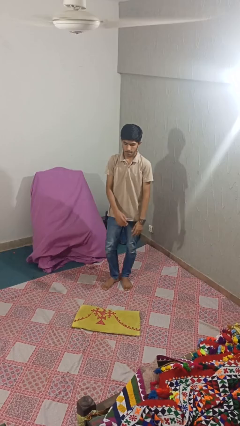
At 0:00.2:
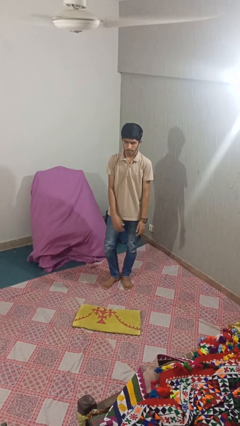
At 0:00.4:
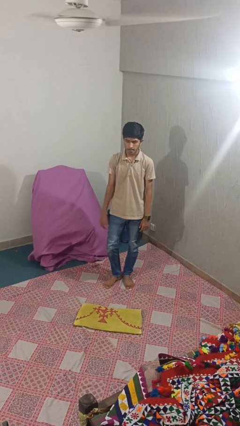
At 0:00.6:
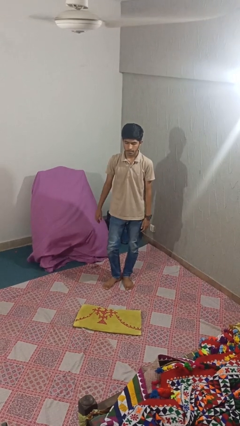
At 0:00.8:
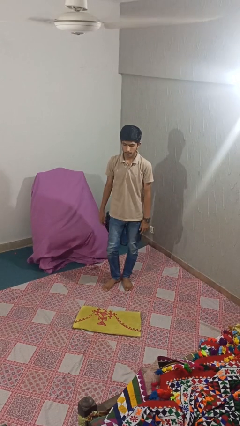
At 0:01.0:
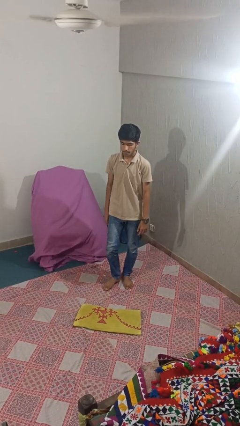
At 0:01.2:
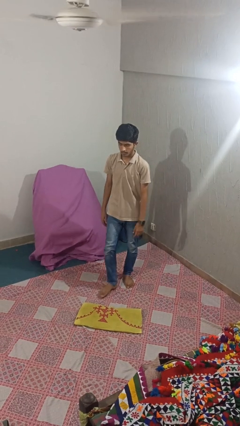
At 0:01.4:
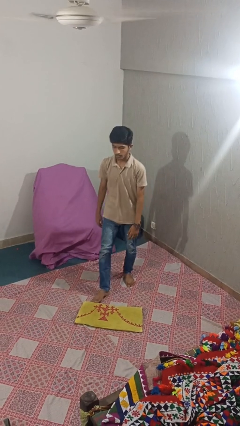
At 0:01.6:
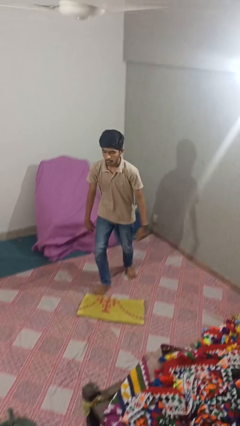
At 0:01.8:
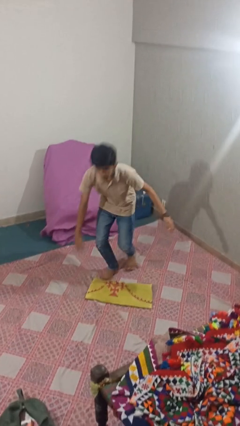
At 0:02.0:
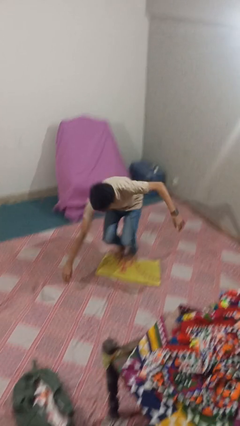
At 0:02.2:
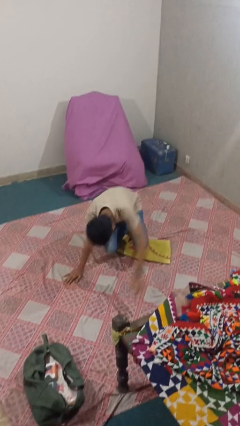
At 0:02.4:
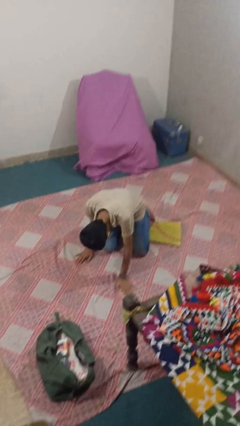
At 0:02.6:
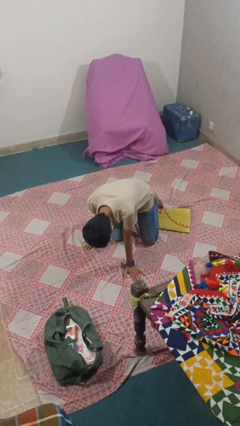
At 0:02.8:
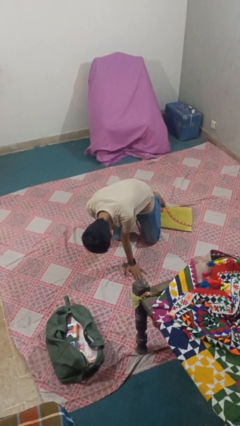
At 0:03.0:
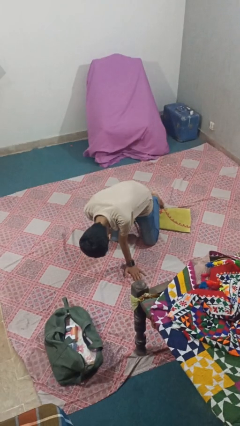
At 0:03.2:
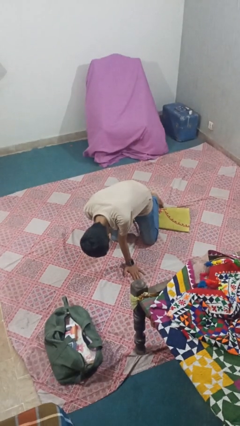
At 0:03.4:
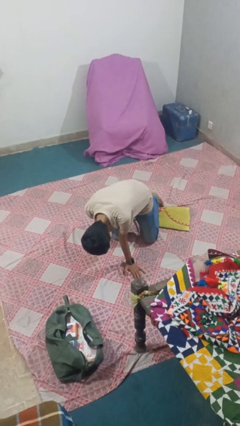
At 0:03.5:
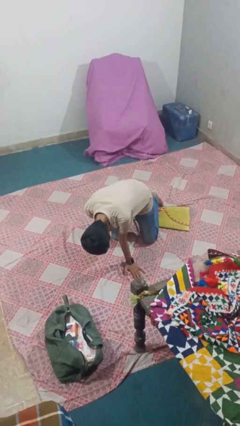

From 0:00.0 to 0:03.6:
person trips on object on floor

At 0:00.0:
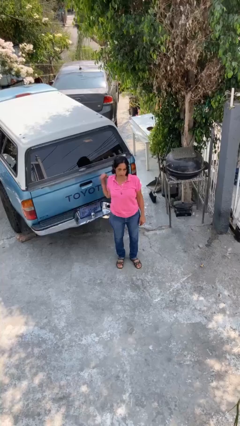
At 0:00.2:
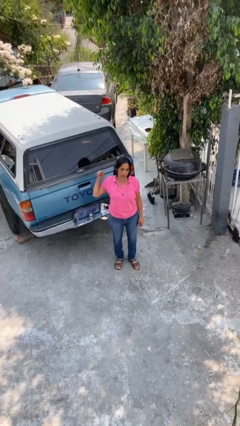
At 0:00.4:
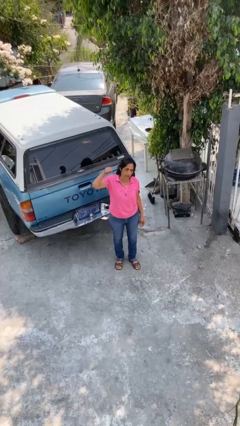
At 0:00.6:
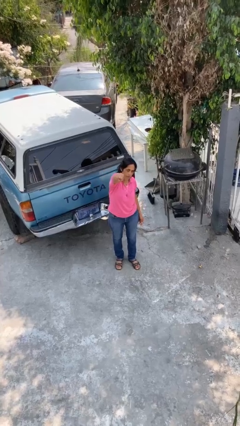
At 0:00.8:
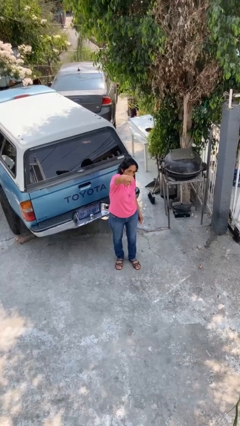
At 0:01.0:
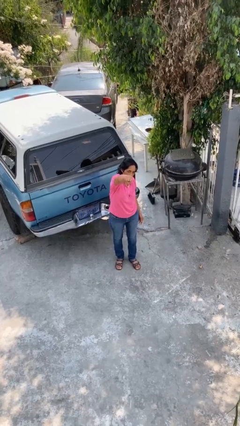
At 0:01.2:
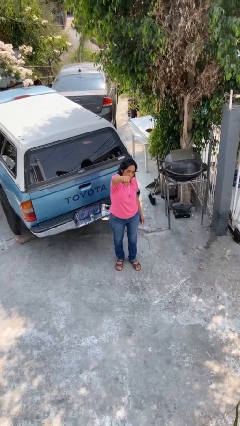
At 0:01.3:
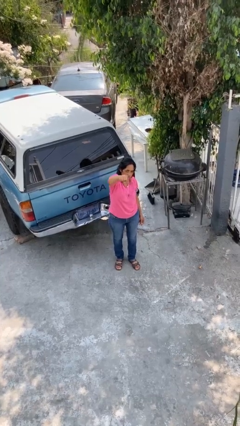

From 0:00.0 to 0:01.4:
person punches

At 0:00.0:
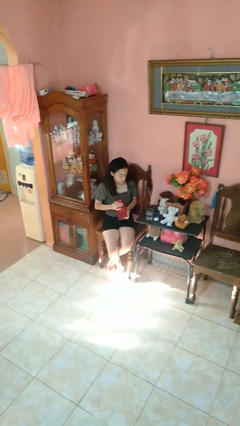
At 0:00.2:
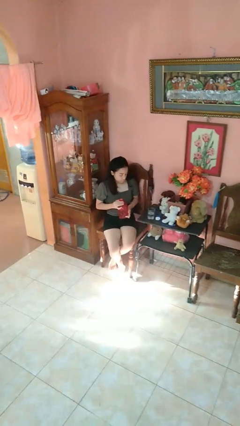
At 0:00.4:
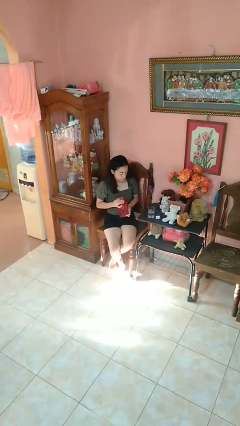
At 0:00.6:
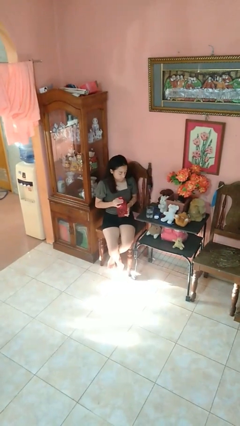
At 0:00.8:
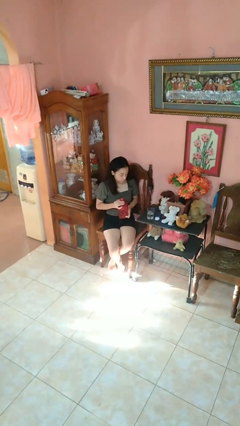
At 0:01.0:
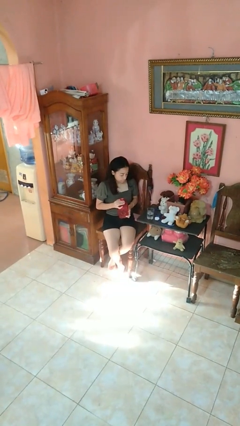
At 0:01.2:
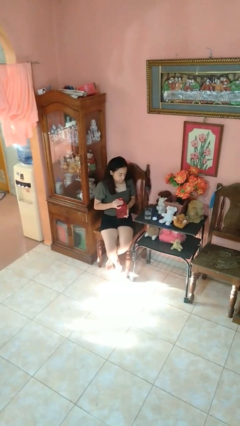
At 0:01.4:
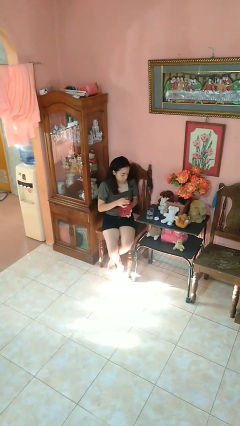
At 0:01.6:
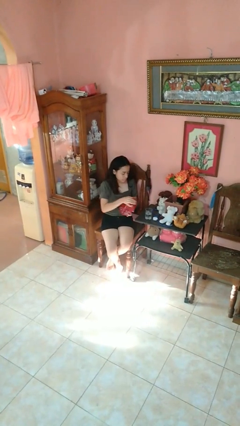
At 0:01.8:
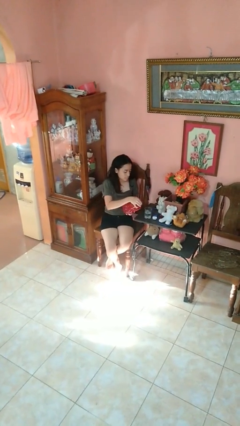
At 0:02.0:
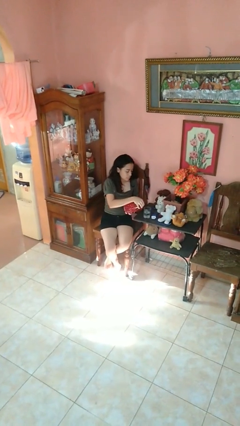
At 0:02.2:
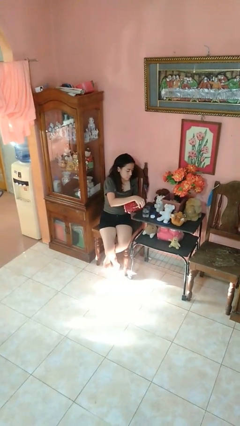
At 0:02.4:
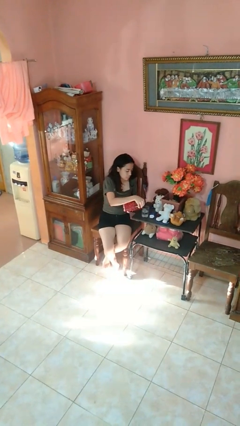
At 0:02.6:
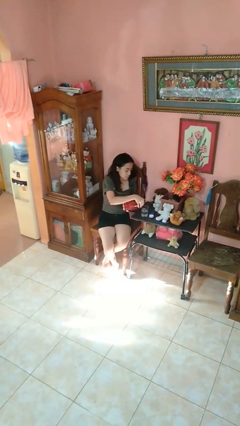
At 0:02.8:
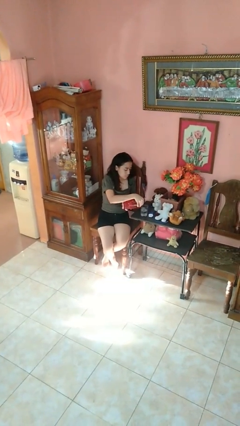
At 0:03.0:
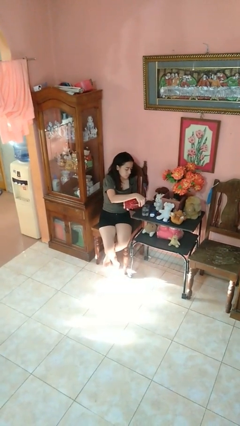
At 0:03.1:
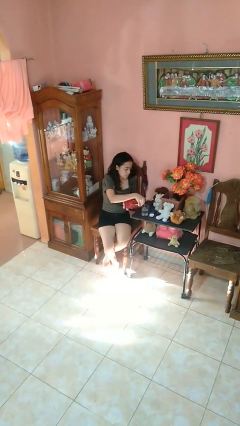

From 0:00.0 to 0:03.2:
person pours liquid into cup

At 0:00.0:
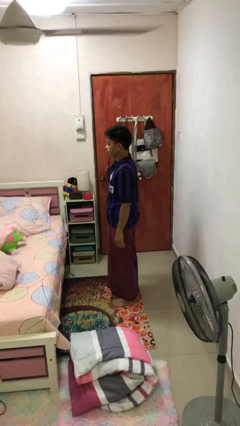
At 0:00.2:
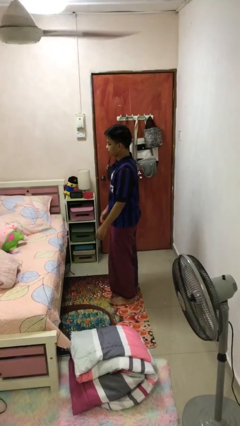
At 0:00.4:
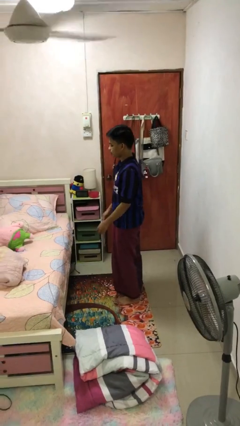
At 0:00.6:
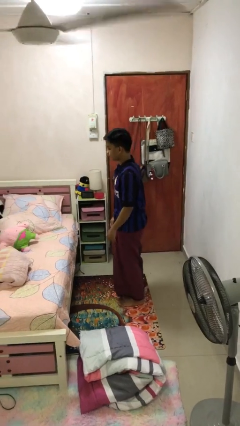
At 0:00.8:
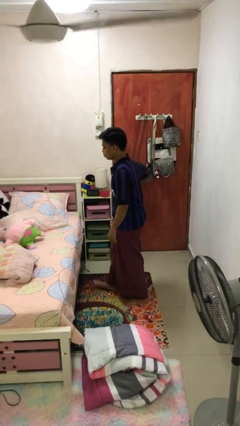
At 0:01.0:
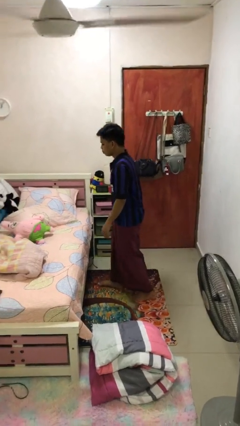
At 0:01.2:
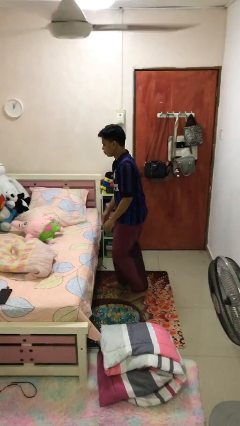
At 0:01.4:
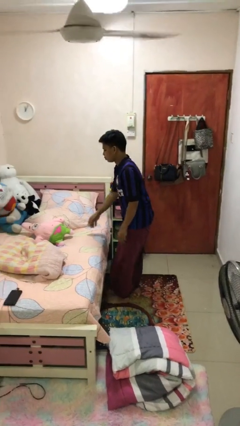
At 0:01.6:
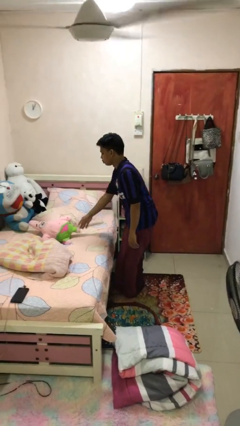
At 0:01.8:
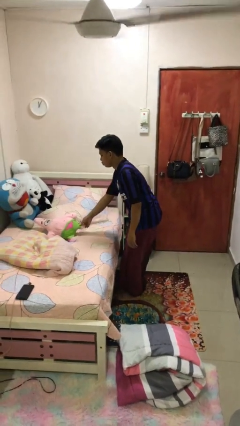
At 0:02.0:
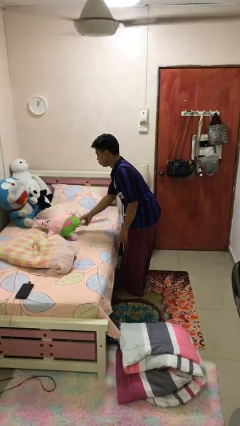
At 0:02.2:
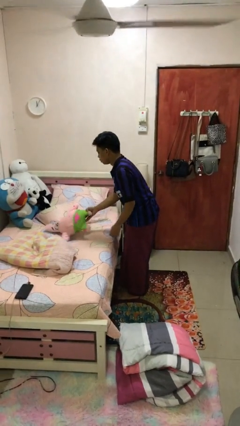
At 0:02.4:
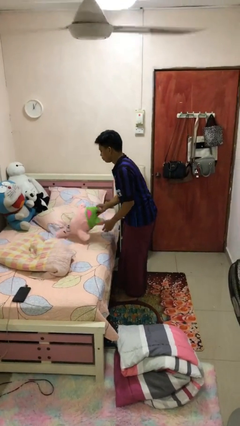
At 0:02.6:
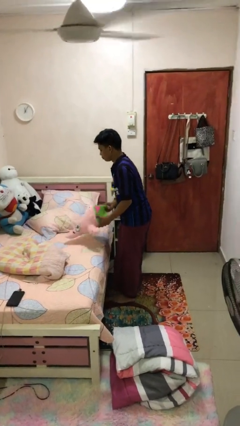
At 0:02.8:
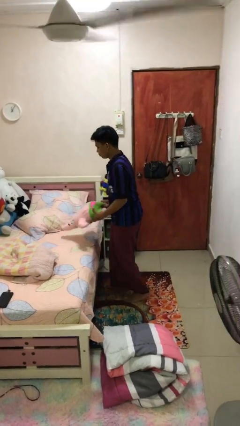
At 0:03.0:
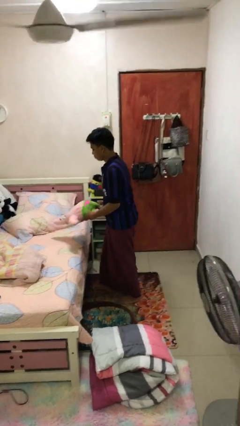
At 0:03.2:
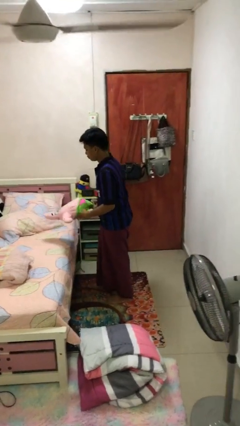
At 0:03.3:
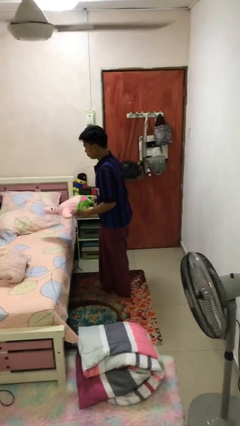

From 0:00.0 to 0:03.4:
person picks up object from bed

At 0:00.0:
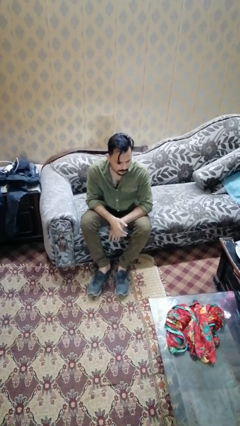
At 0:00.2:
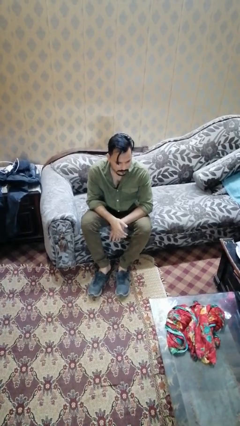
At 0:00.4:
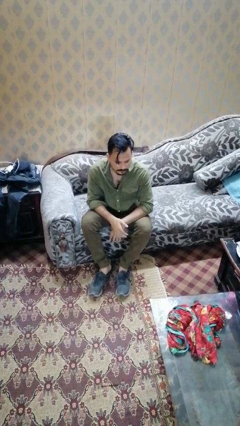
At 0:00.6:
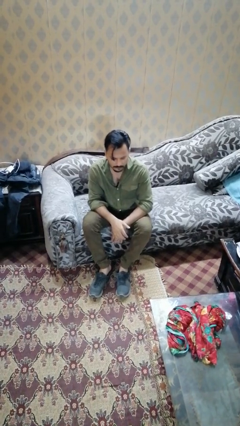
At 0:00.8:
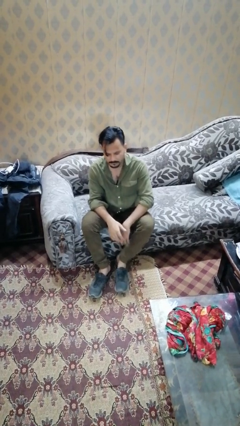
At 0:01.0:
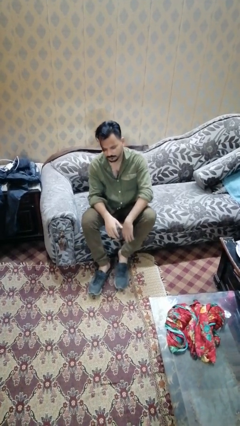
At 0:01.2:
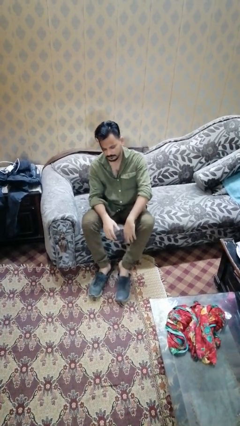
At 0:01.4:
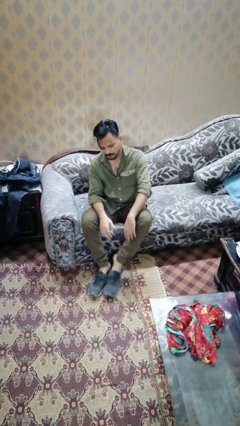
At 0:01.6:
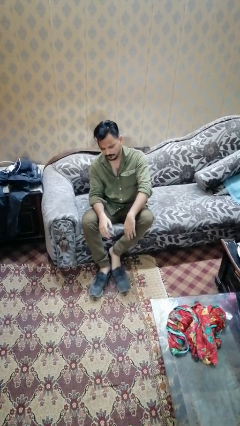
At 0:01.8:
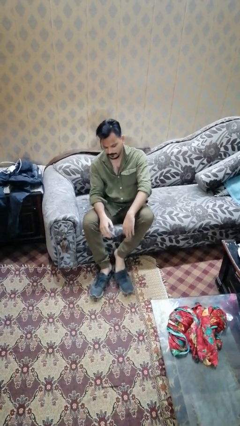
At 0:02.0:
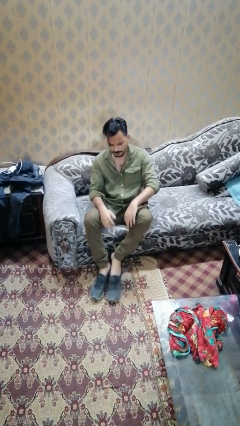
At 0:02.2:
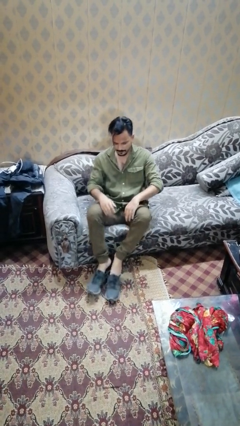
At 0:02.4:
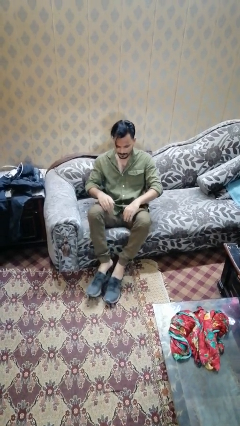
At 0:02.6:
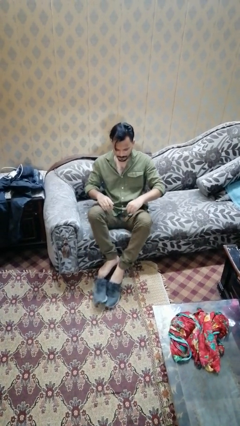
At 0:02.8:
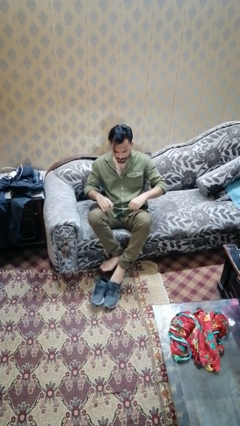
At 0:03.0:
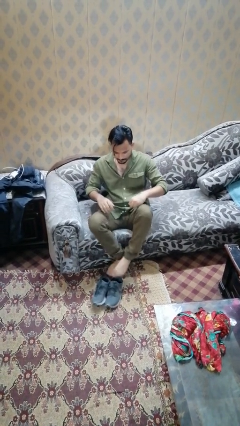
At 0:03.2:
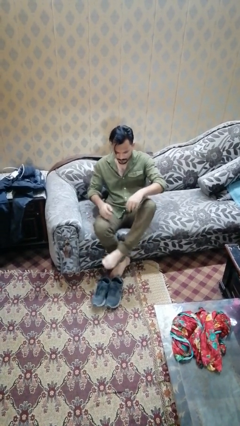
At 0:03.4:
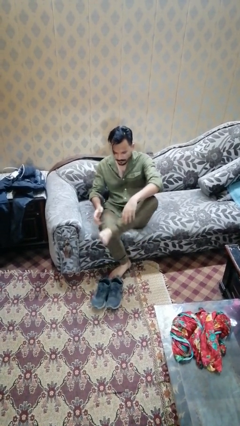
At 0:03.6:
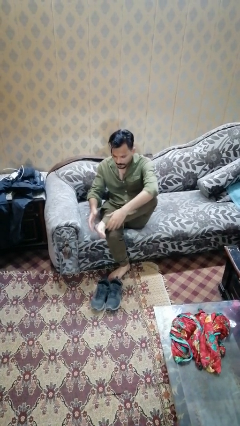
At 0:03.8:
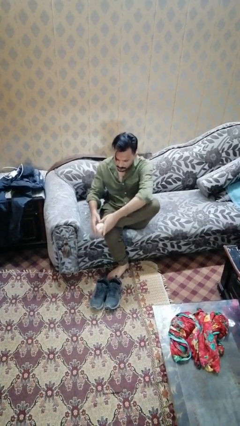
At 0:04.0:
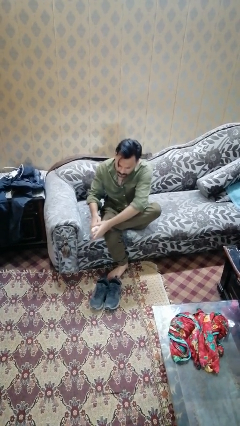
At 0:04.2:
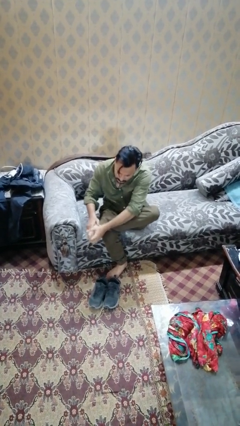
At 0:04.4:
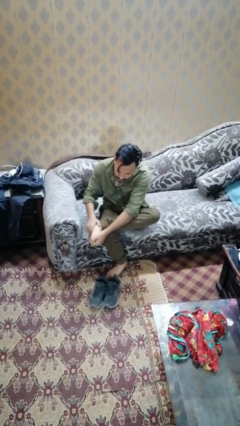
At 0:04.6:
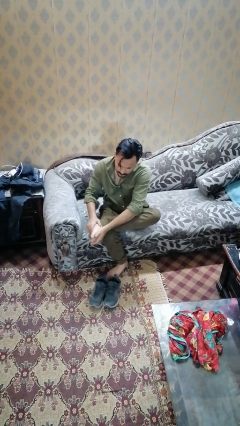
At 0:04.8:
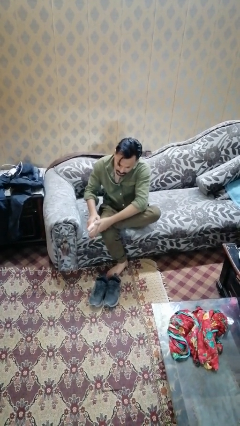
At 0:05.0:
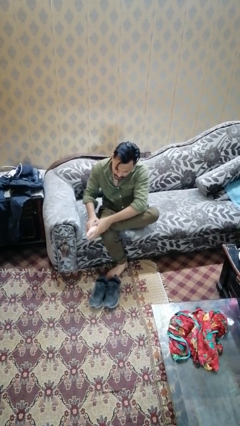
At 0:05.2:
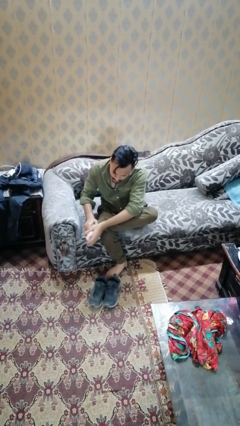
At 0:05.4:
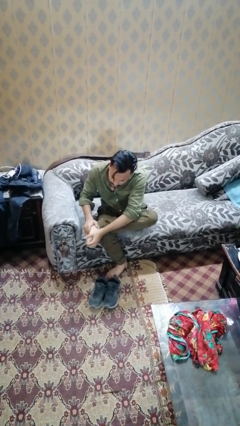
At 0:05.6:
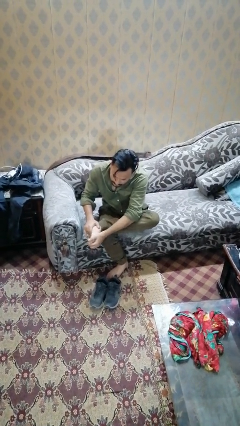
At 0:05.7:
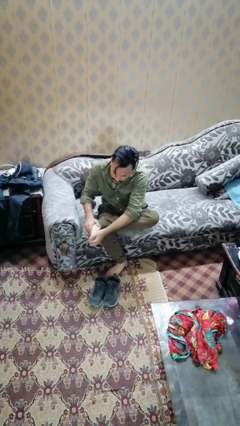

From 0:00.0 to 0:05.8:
person rubs foot

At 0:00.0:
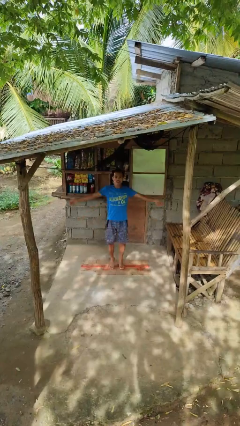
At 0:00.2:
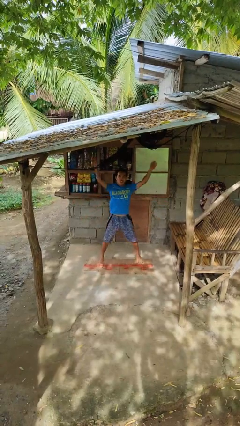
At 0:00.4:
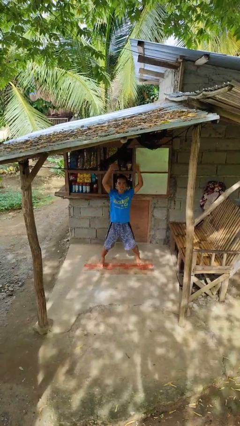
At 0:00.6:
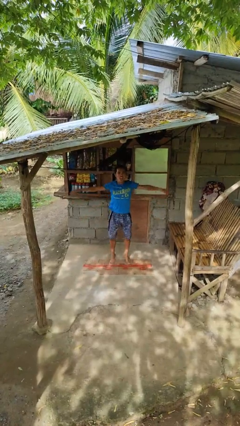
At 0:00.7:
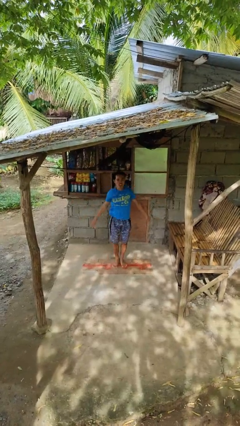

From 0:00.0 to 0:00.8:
person exercises with jumping jacks
